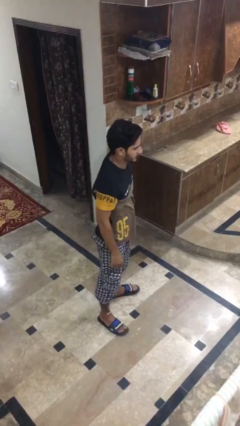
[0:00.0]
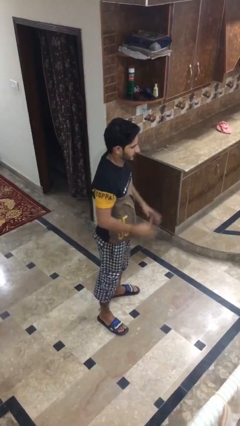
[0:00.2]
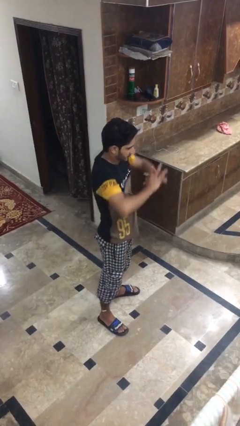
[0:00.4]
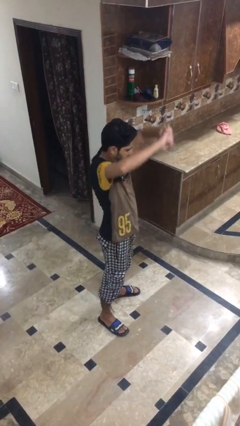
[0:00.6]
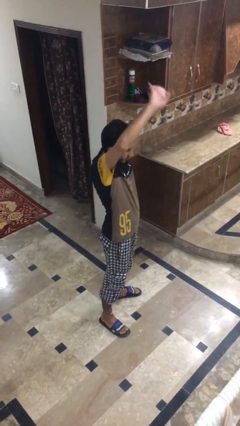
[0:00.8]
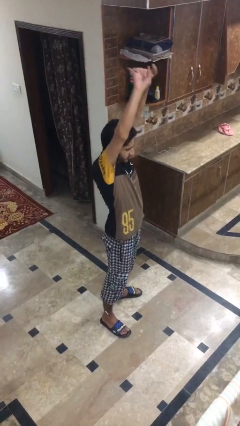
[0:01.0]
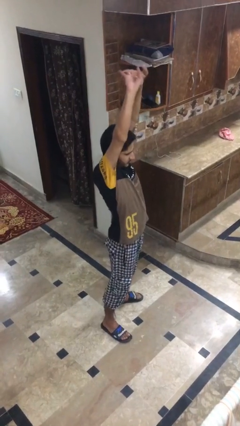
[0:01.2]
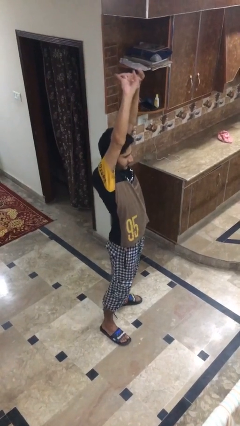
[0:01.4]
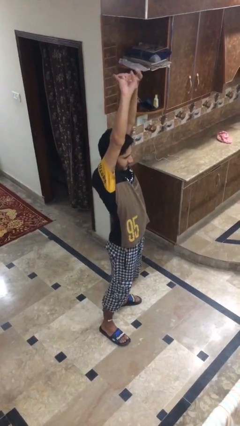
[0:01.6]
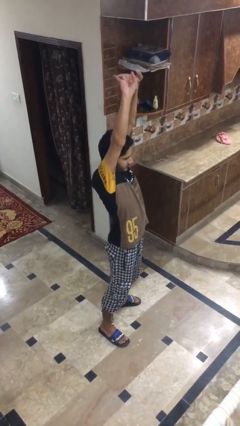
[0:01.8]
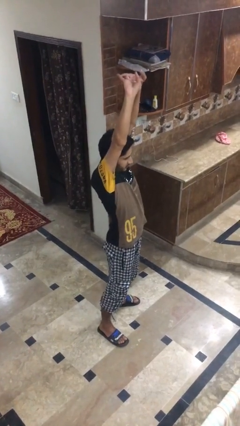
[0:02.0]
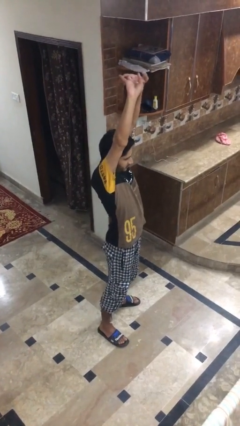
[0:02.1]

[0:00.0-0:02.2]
person stretches arms over head

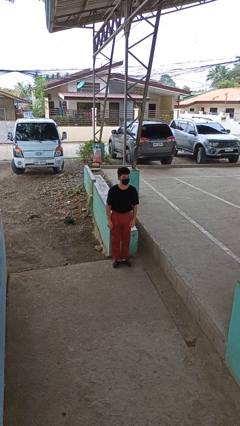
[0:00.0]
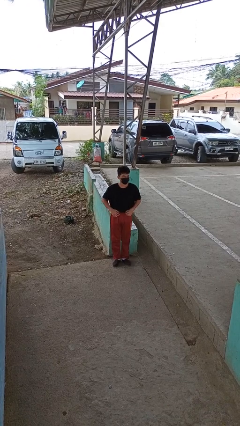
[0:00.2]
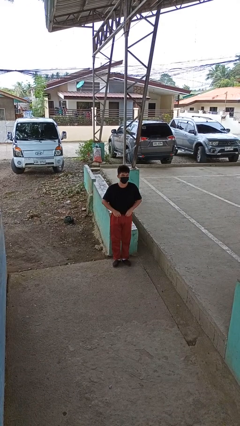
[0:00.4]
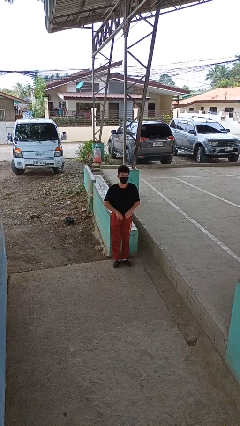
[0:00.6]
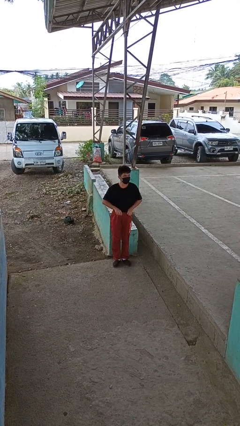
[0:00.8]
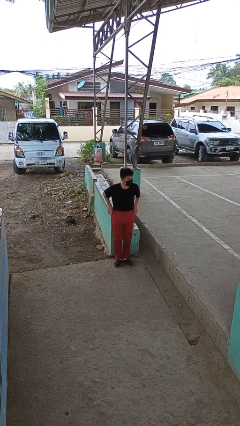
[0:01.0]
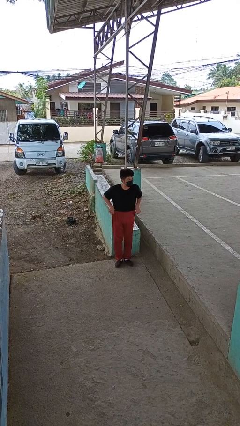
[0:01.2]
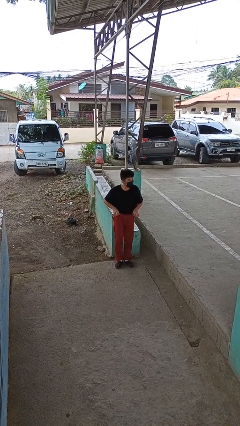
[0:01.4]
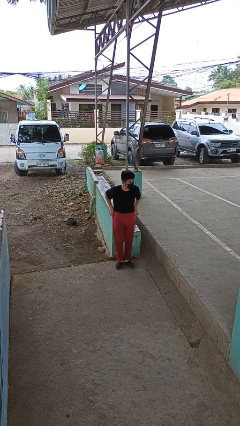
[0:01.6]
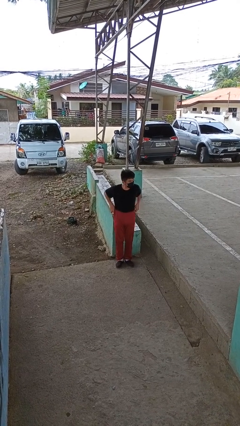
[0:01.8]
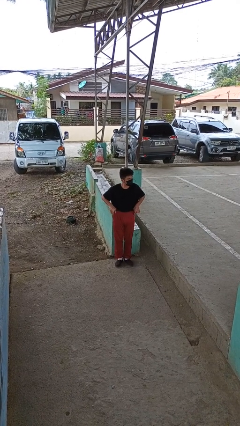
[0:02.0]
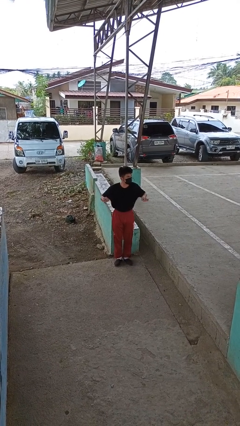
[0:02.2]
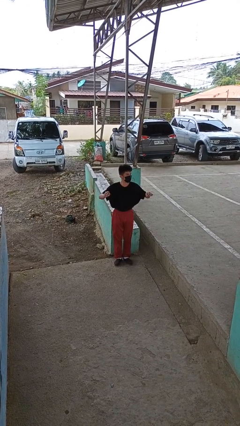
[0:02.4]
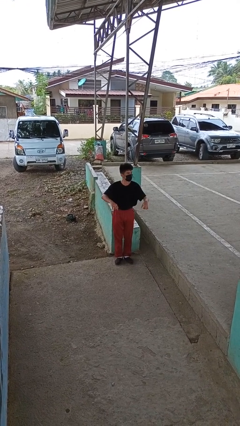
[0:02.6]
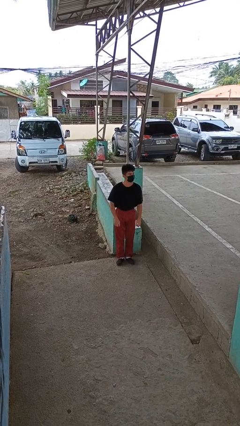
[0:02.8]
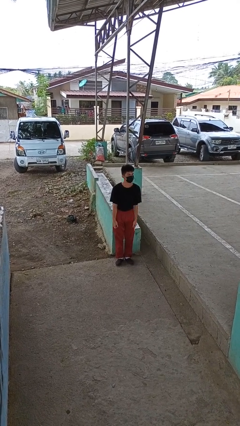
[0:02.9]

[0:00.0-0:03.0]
person hikes up pants

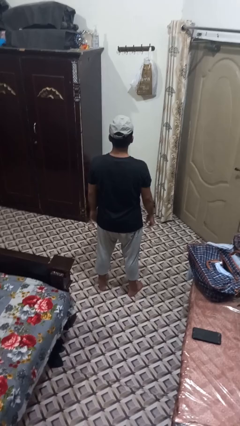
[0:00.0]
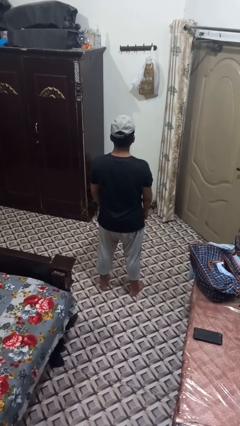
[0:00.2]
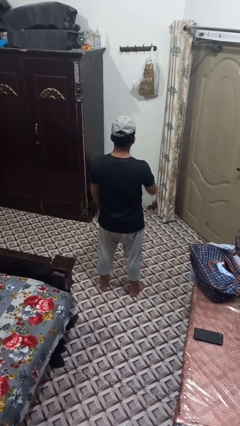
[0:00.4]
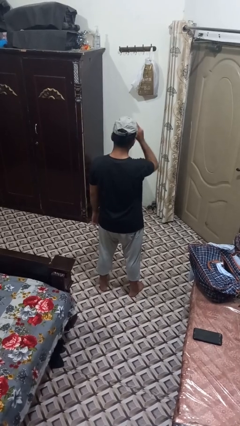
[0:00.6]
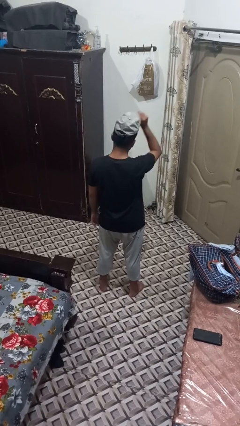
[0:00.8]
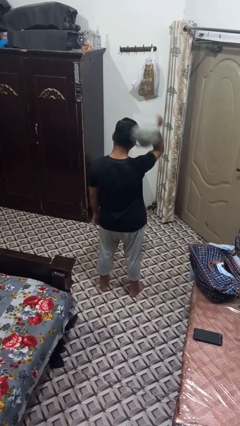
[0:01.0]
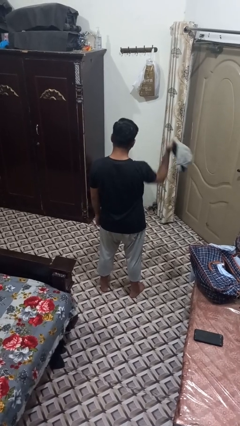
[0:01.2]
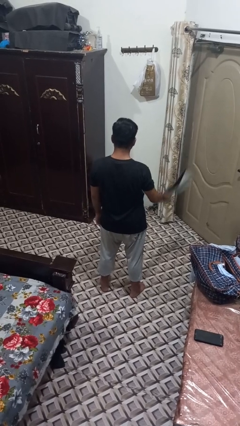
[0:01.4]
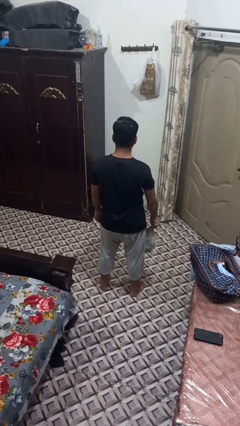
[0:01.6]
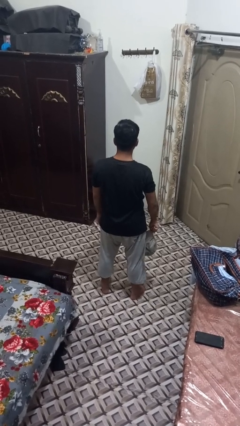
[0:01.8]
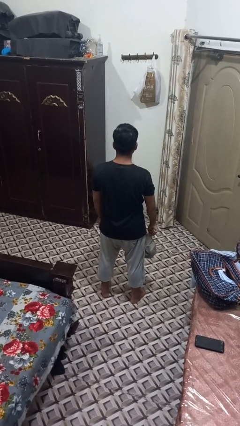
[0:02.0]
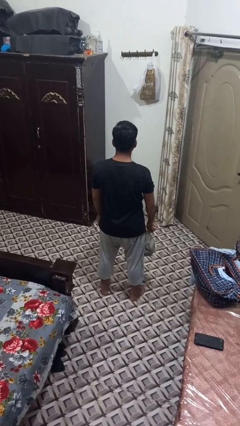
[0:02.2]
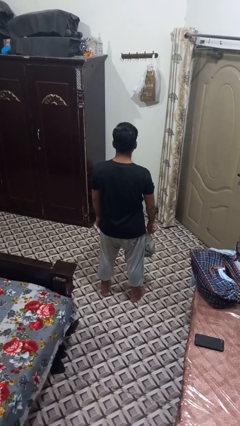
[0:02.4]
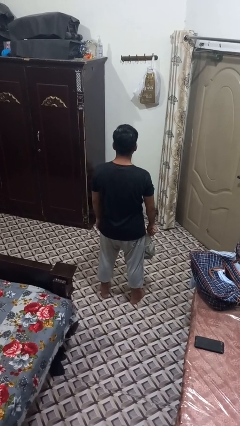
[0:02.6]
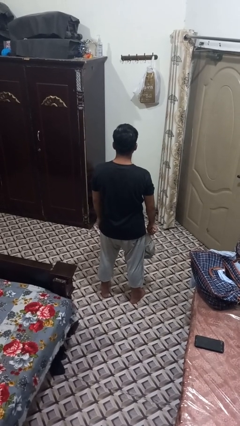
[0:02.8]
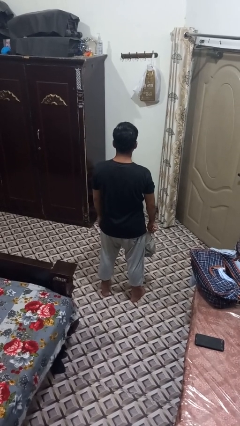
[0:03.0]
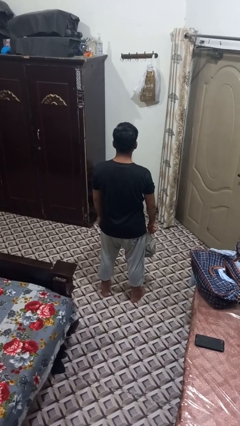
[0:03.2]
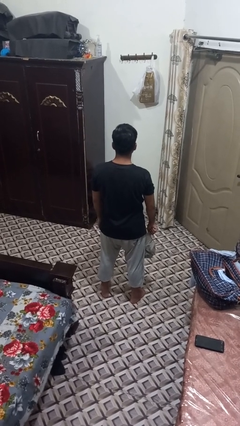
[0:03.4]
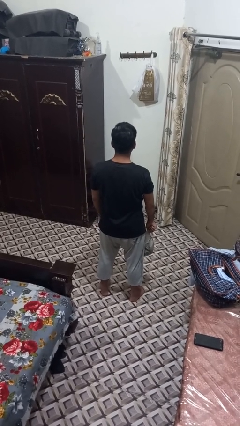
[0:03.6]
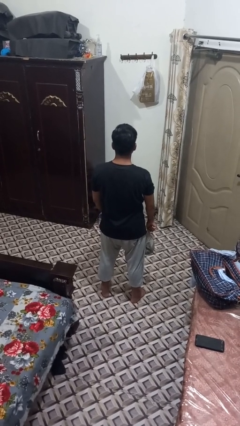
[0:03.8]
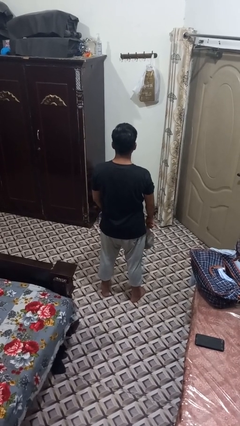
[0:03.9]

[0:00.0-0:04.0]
person takes off hat

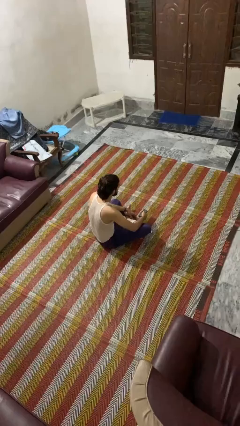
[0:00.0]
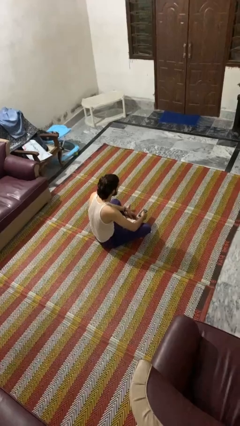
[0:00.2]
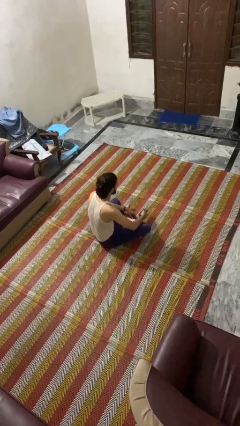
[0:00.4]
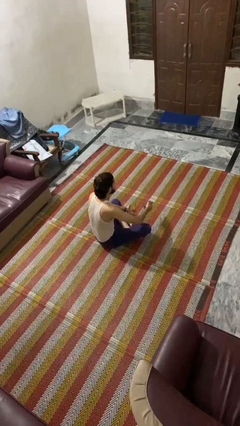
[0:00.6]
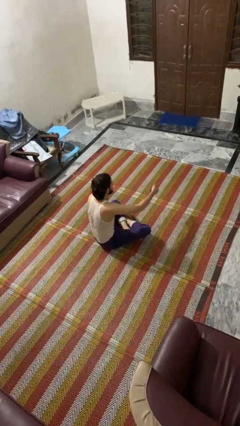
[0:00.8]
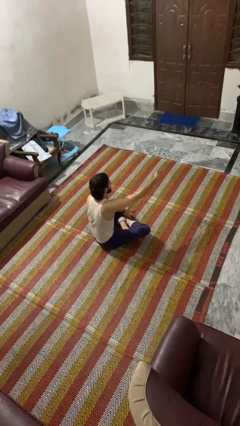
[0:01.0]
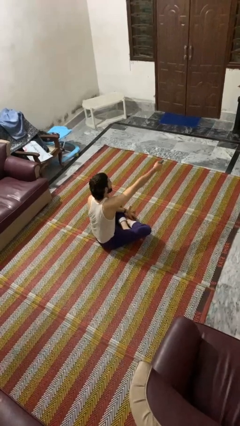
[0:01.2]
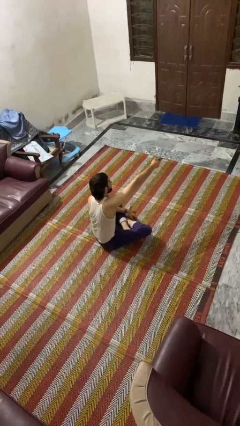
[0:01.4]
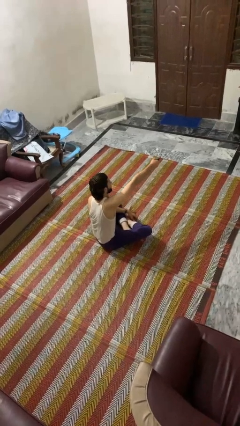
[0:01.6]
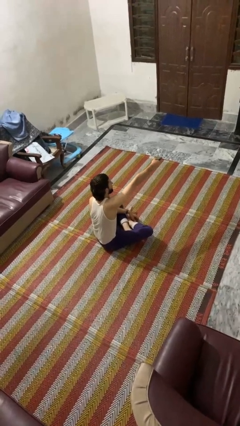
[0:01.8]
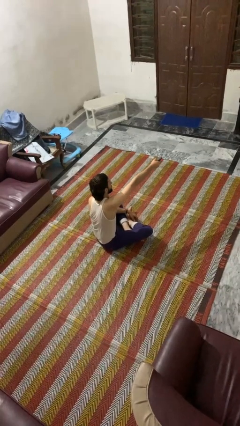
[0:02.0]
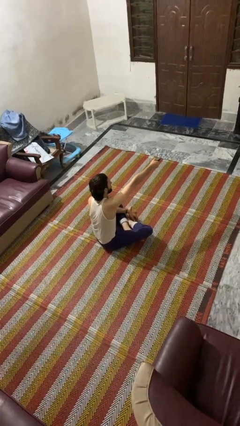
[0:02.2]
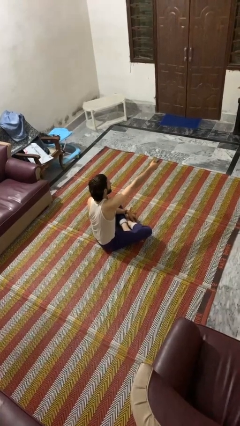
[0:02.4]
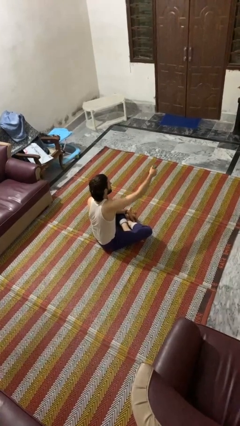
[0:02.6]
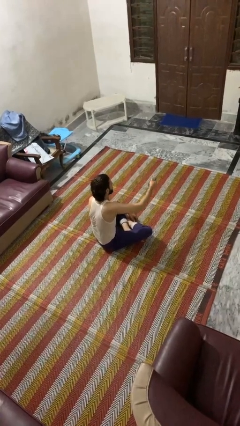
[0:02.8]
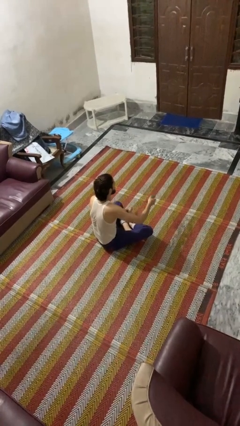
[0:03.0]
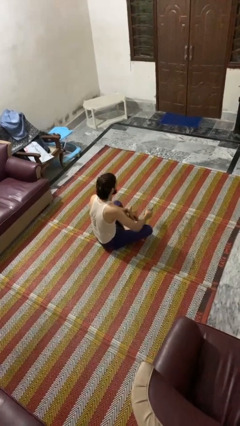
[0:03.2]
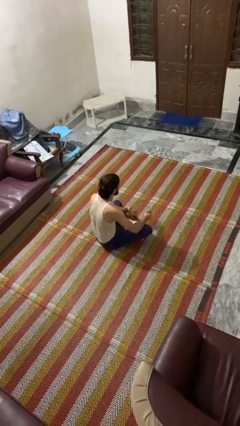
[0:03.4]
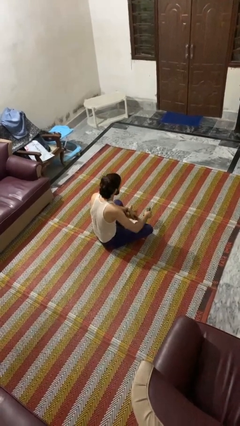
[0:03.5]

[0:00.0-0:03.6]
person uses television remote

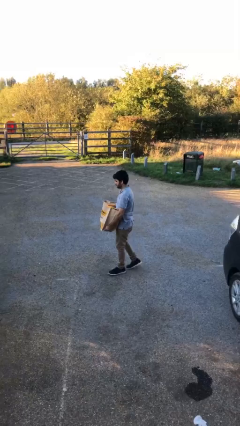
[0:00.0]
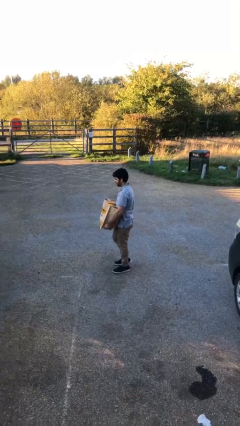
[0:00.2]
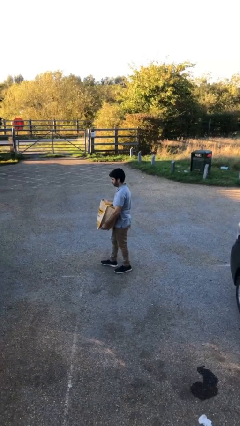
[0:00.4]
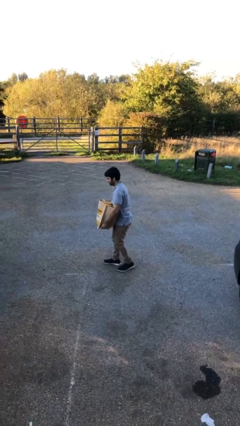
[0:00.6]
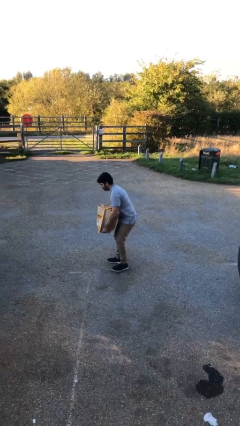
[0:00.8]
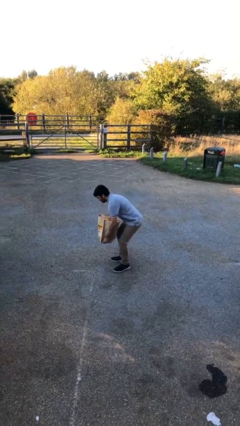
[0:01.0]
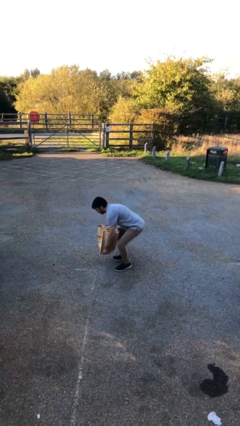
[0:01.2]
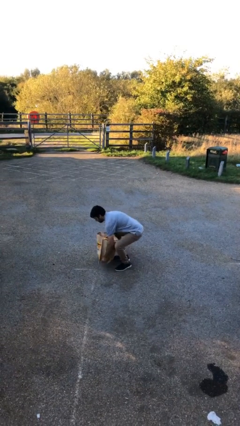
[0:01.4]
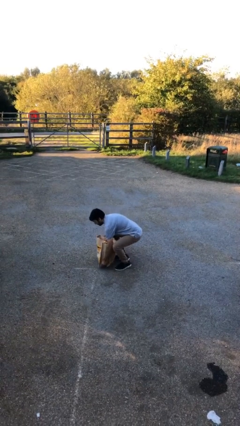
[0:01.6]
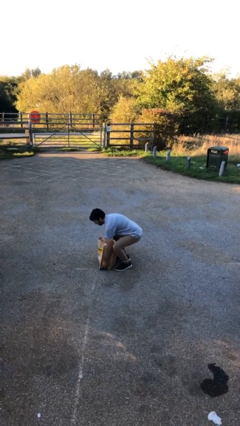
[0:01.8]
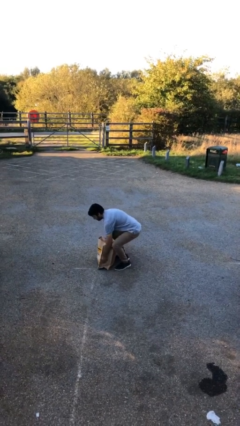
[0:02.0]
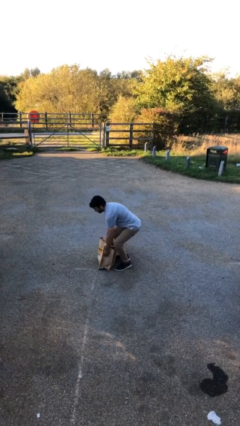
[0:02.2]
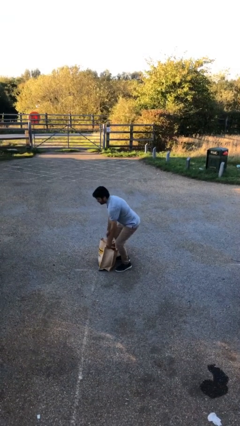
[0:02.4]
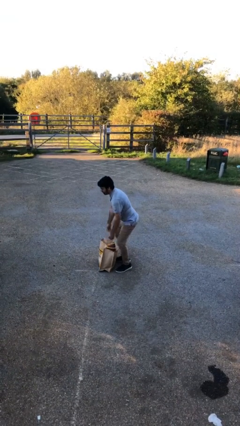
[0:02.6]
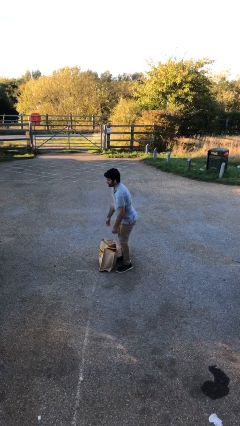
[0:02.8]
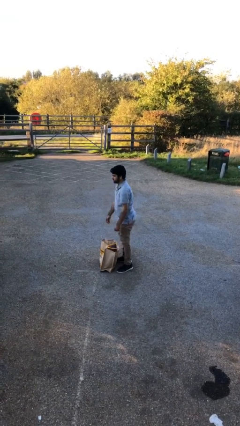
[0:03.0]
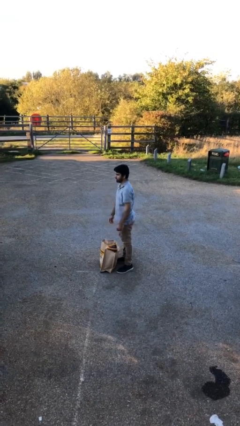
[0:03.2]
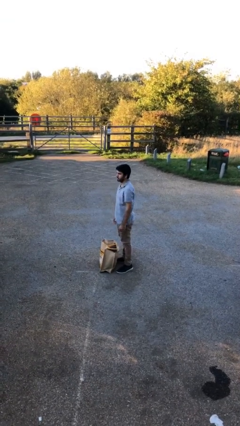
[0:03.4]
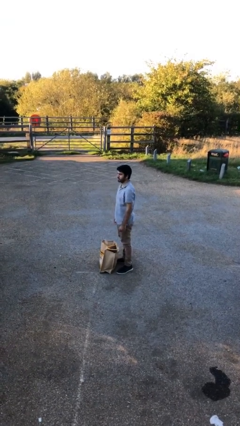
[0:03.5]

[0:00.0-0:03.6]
person puts down object on floor

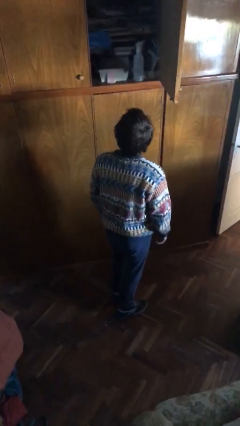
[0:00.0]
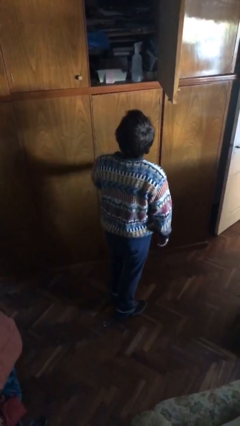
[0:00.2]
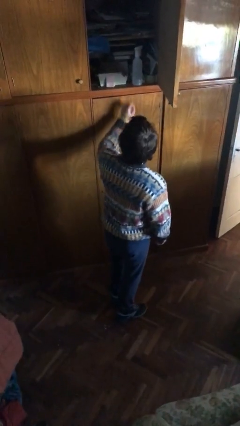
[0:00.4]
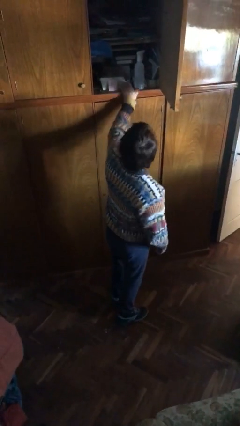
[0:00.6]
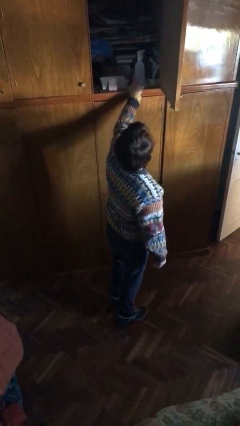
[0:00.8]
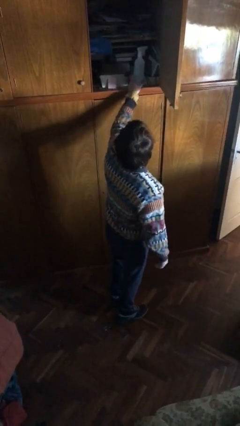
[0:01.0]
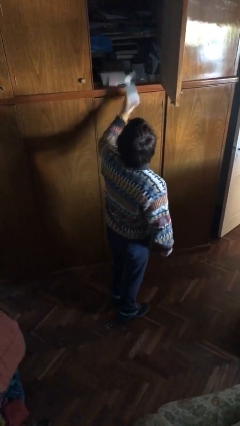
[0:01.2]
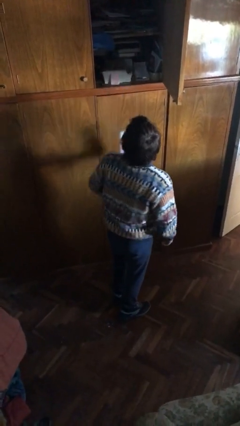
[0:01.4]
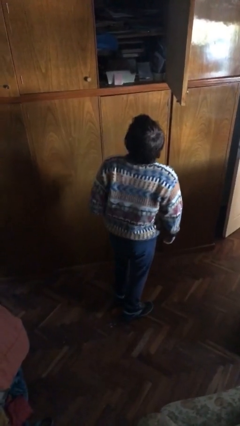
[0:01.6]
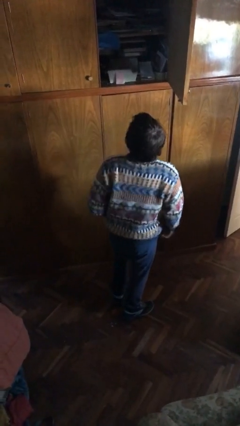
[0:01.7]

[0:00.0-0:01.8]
person picks up object from cabinet
